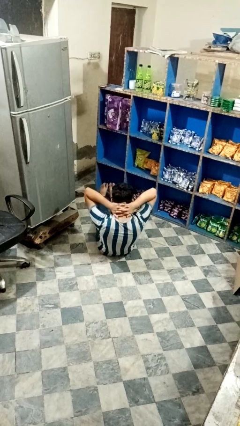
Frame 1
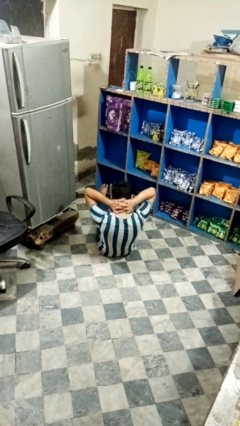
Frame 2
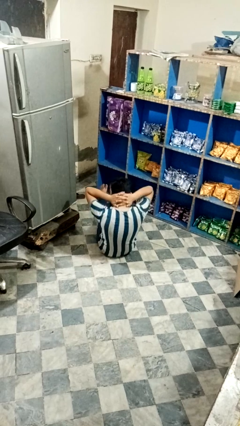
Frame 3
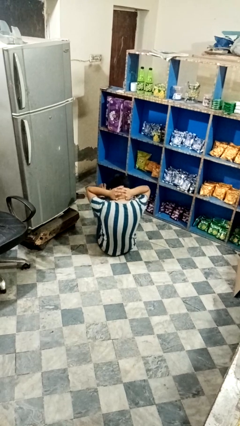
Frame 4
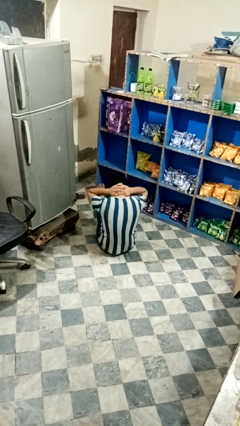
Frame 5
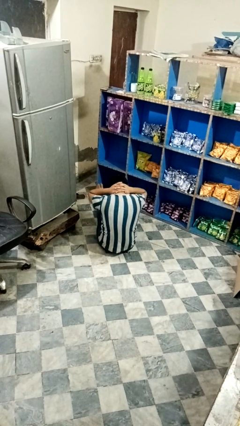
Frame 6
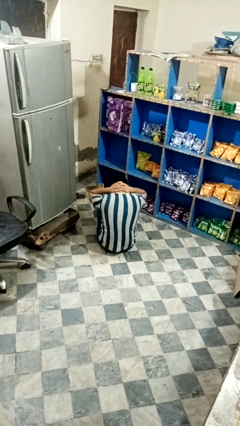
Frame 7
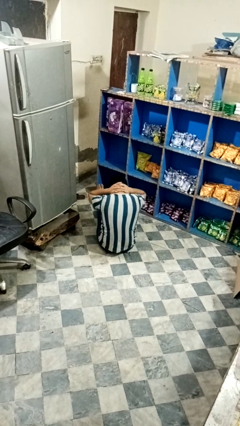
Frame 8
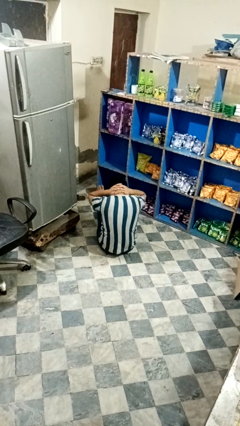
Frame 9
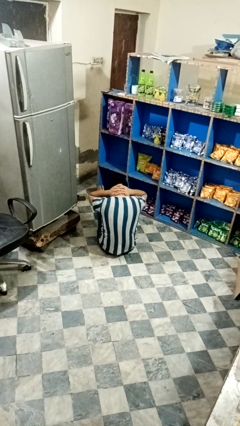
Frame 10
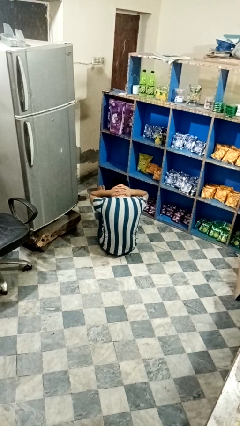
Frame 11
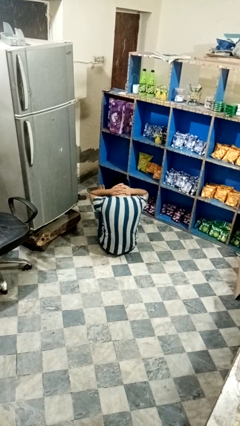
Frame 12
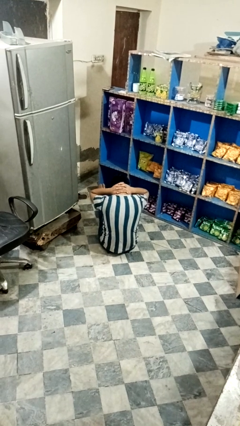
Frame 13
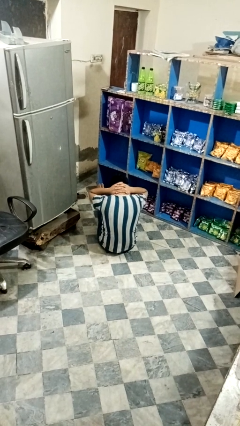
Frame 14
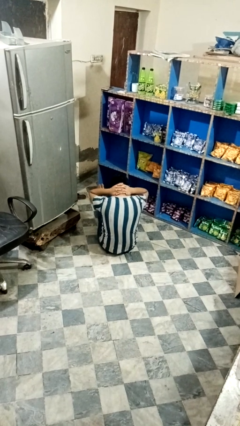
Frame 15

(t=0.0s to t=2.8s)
person exercises with situp

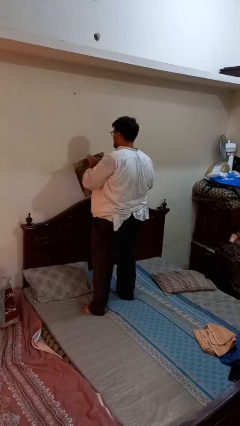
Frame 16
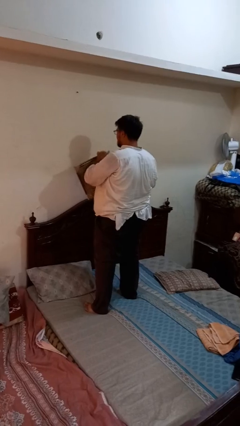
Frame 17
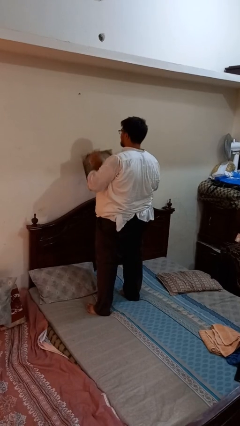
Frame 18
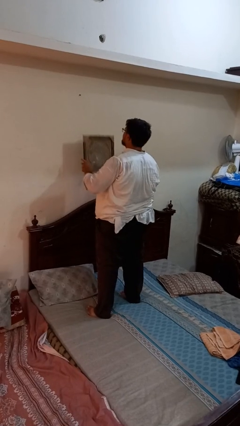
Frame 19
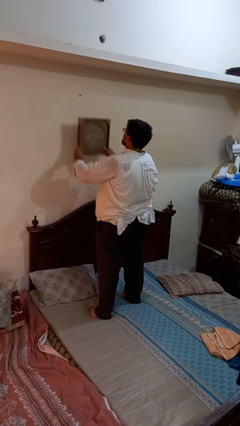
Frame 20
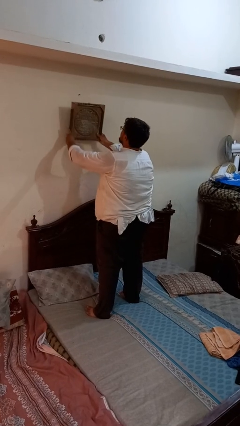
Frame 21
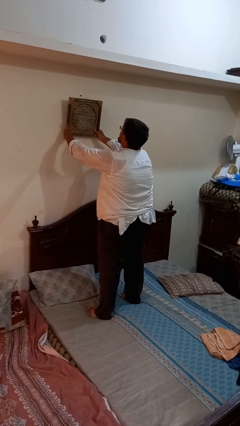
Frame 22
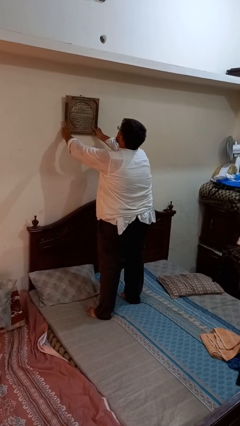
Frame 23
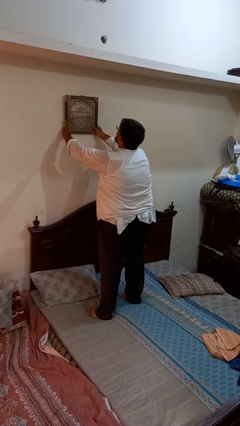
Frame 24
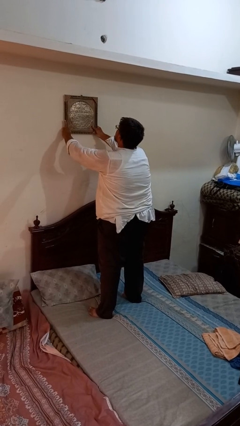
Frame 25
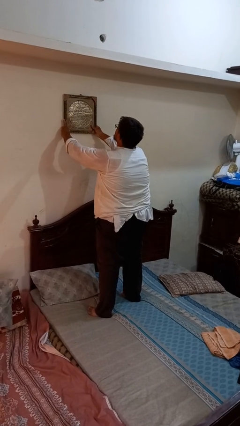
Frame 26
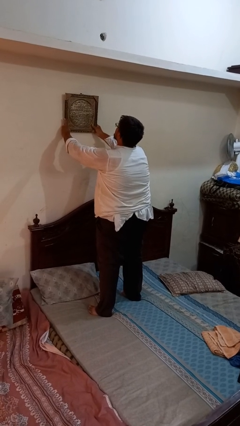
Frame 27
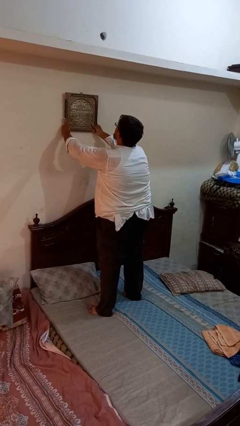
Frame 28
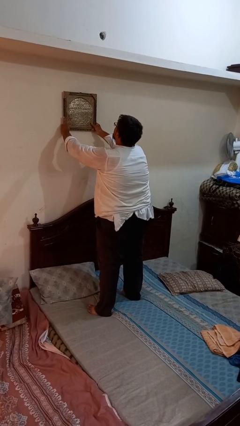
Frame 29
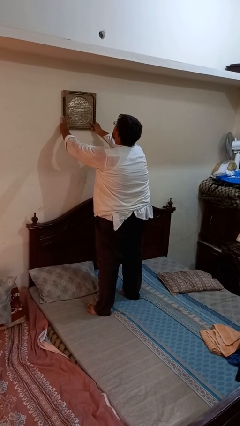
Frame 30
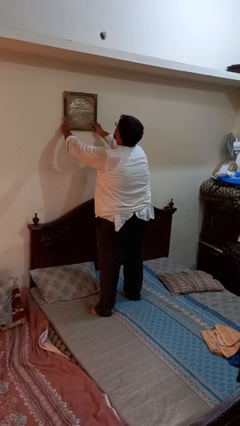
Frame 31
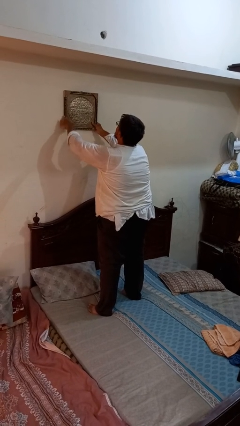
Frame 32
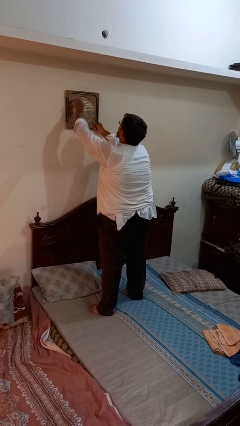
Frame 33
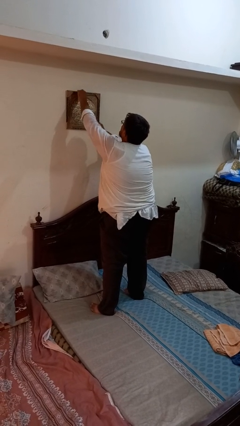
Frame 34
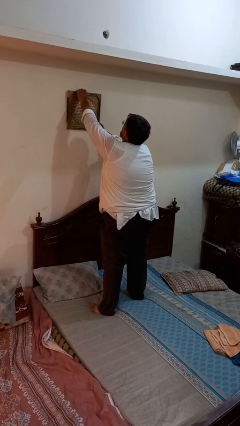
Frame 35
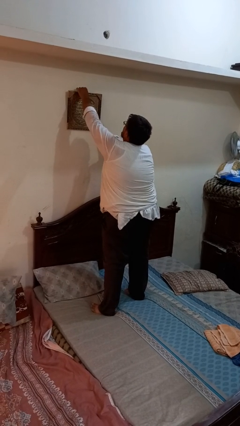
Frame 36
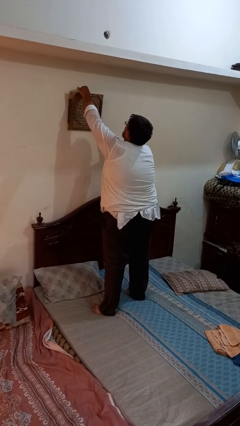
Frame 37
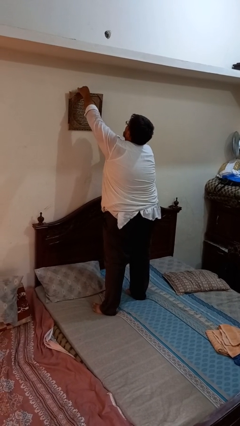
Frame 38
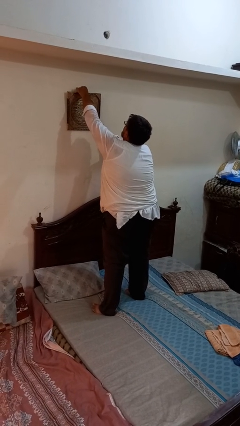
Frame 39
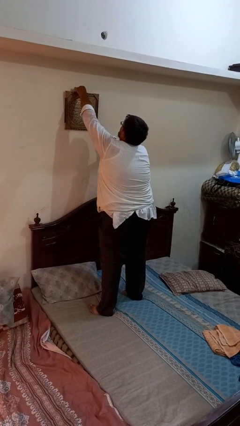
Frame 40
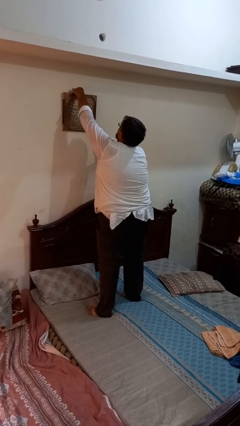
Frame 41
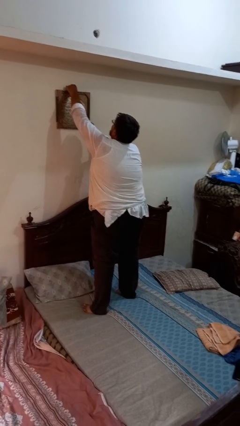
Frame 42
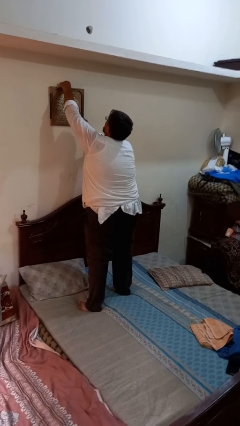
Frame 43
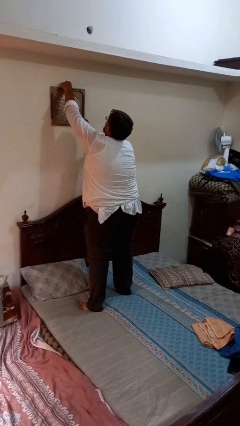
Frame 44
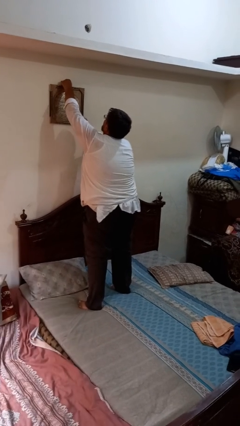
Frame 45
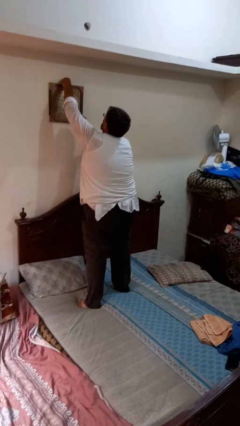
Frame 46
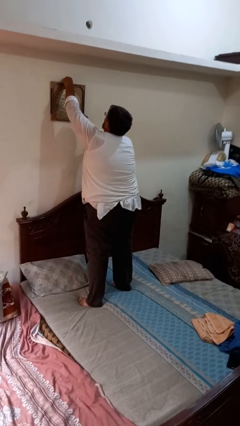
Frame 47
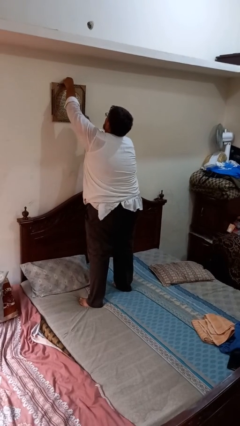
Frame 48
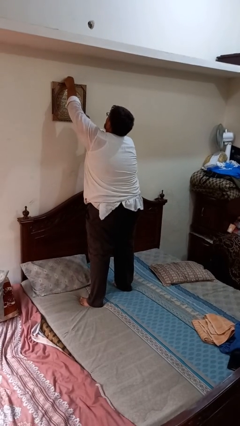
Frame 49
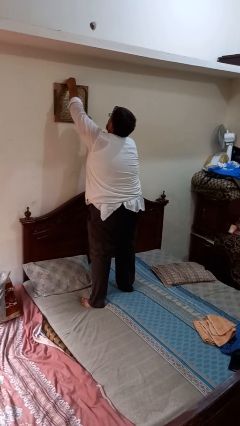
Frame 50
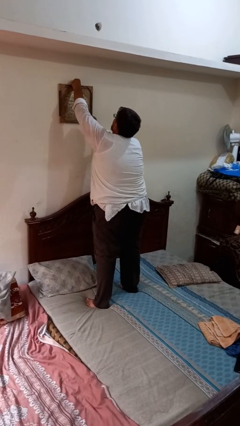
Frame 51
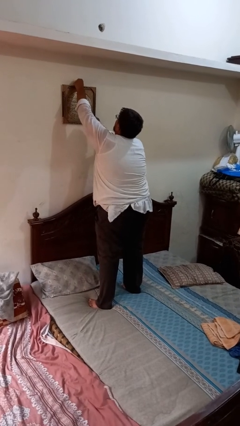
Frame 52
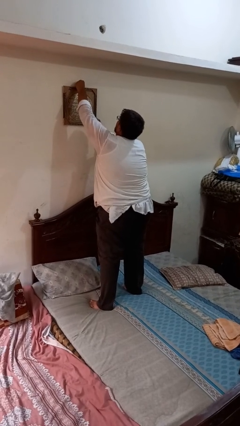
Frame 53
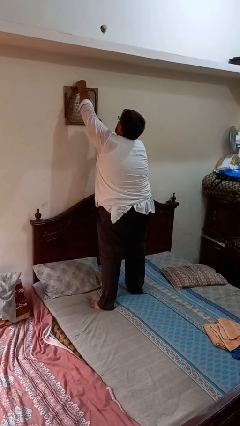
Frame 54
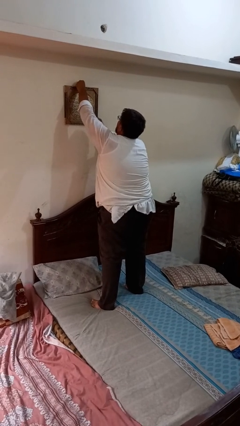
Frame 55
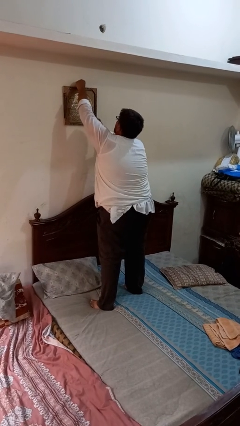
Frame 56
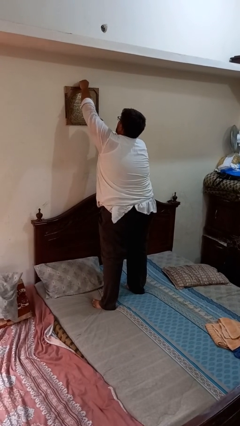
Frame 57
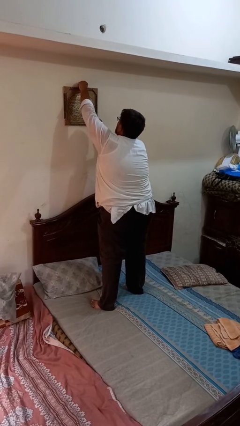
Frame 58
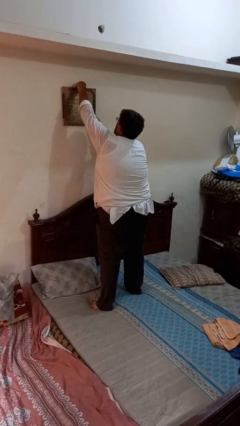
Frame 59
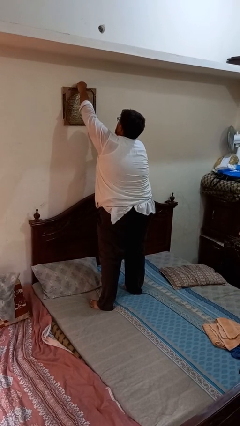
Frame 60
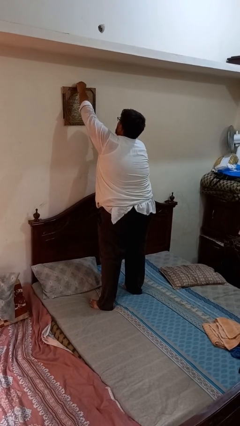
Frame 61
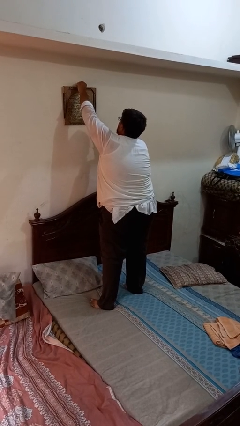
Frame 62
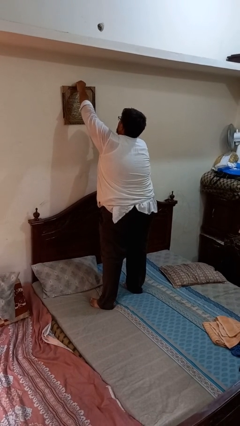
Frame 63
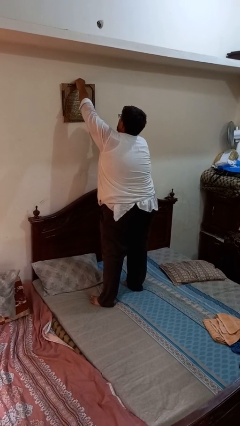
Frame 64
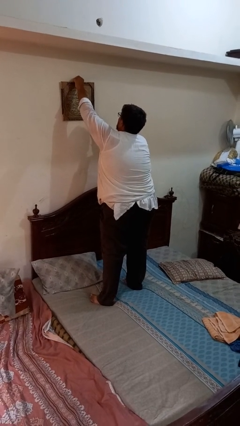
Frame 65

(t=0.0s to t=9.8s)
person puts up picture frame

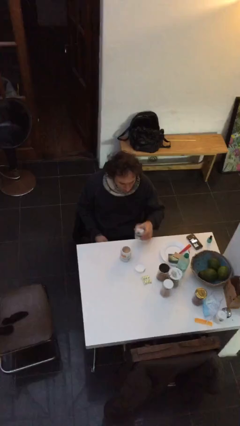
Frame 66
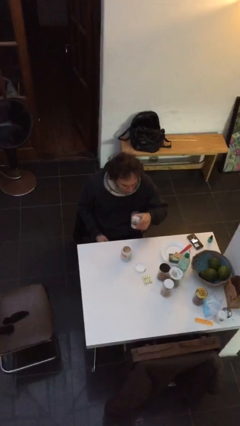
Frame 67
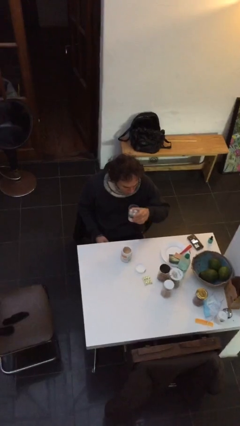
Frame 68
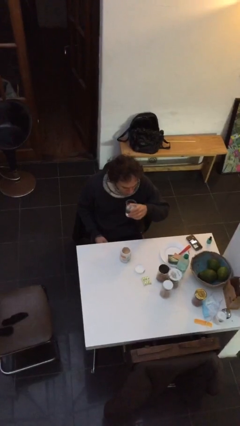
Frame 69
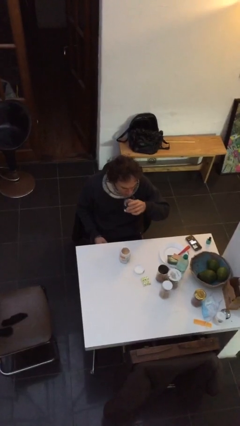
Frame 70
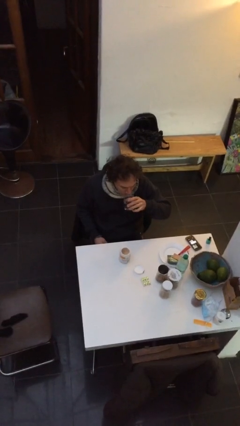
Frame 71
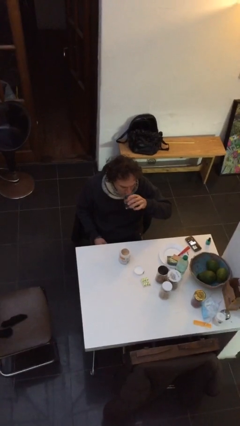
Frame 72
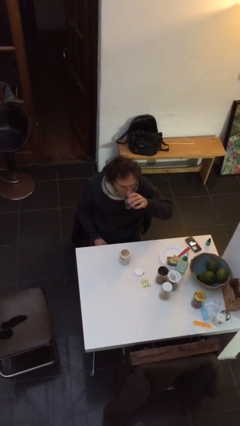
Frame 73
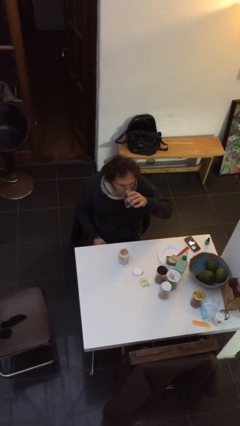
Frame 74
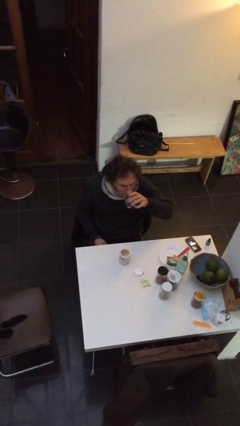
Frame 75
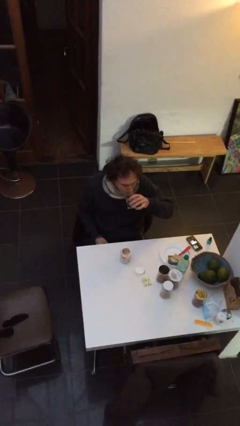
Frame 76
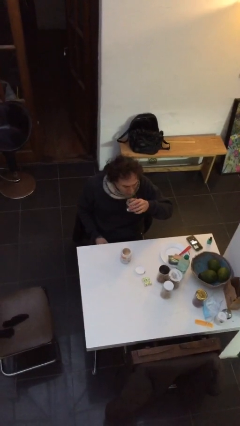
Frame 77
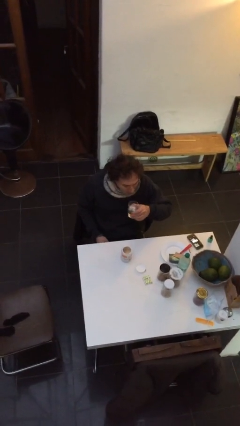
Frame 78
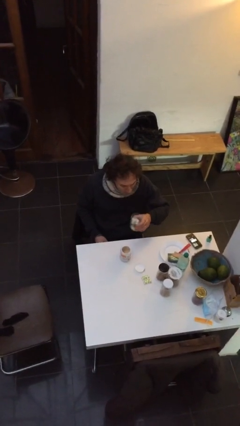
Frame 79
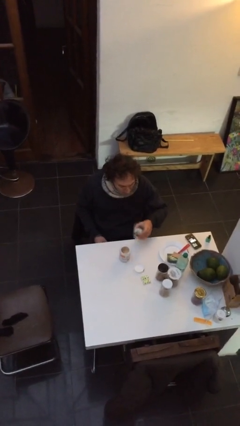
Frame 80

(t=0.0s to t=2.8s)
person drinks from cup

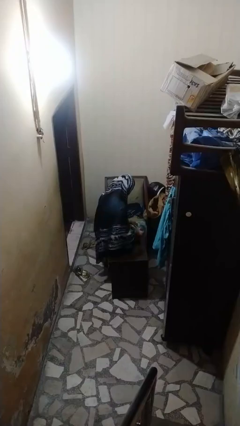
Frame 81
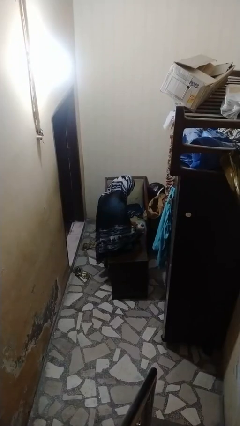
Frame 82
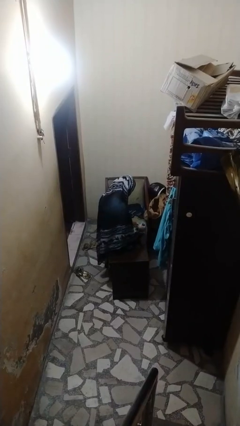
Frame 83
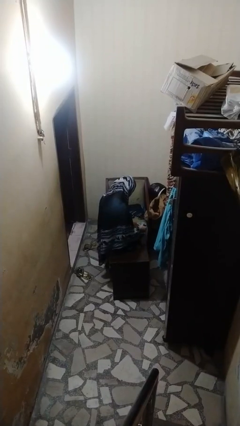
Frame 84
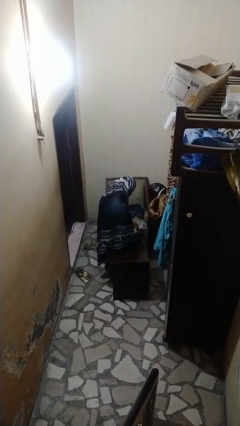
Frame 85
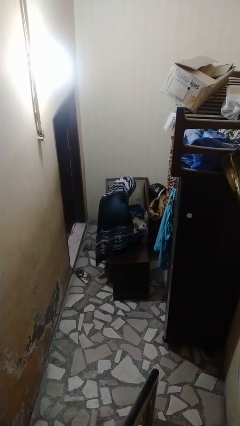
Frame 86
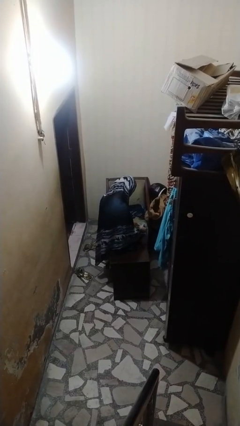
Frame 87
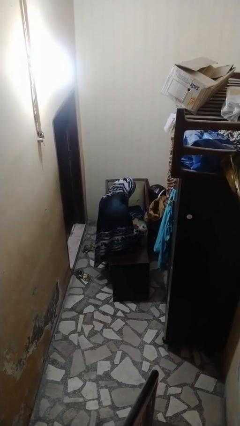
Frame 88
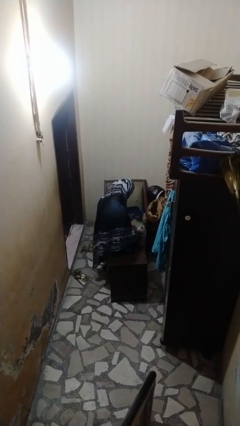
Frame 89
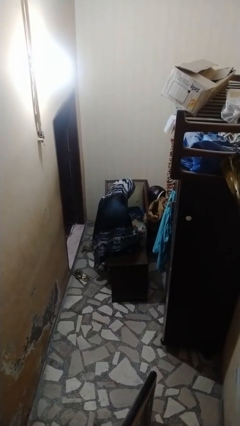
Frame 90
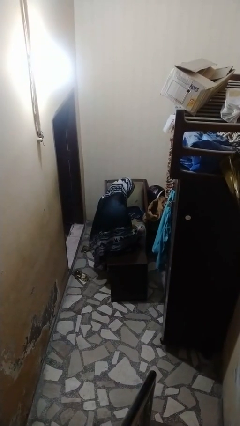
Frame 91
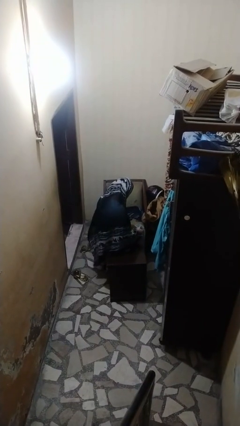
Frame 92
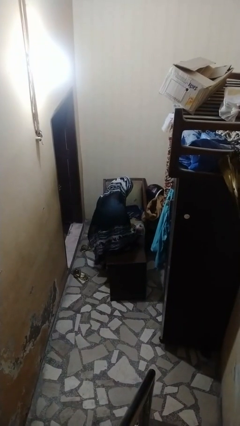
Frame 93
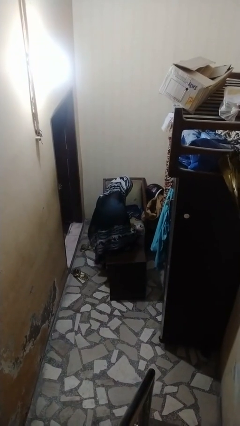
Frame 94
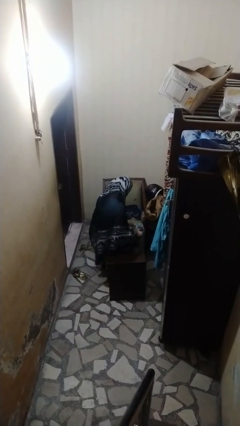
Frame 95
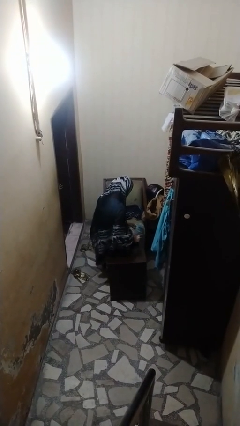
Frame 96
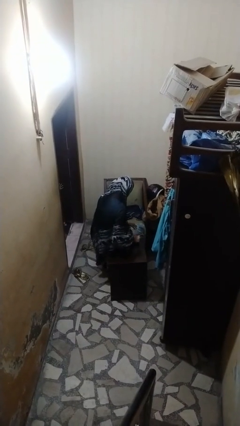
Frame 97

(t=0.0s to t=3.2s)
person paints fingernails
